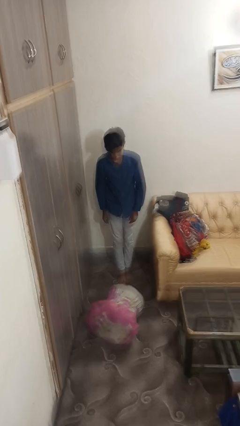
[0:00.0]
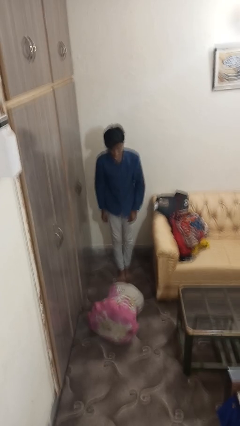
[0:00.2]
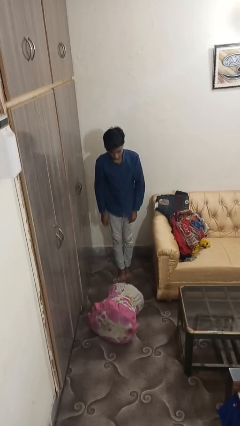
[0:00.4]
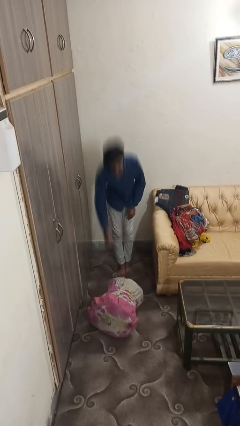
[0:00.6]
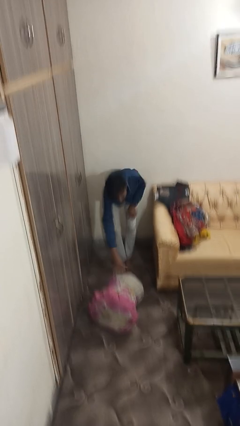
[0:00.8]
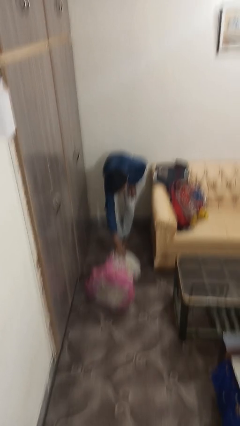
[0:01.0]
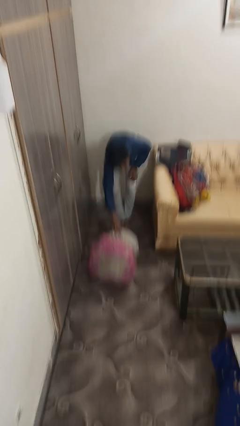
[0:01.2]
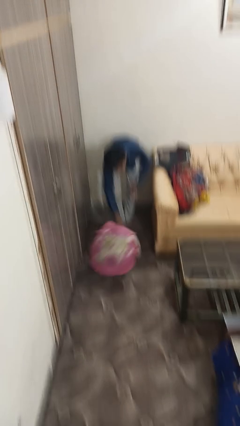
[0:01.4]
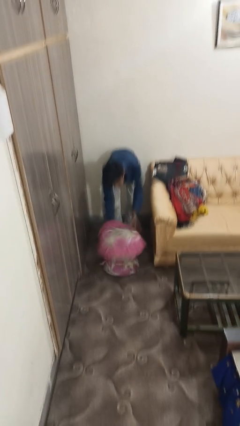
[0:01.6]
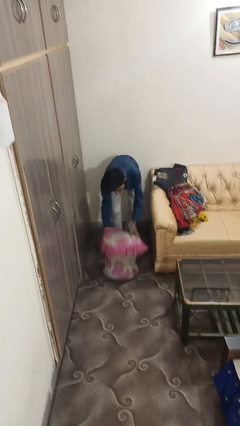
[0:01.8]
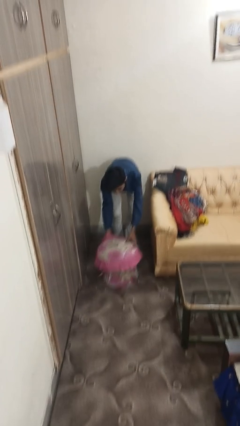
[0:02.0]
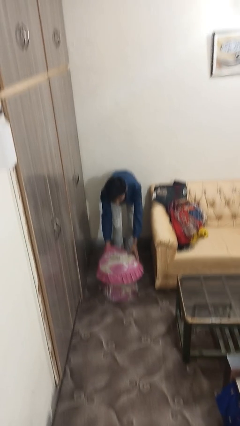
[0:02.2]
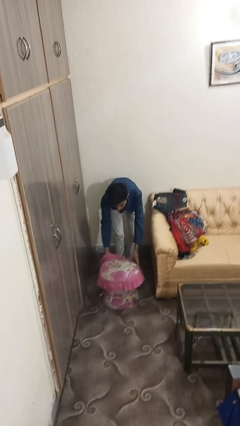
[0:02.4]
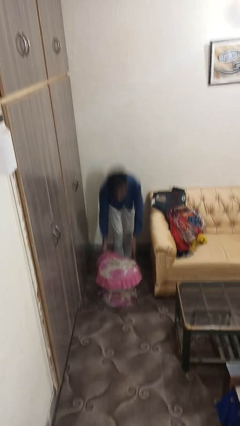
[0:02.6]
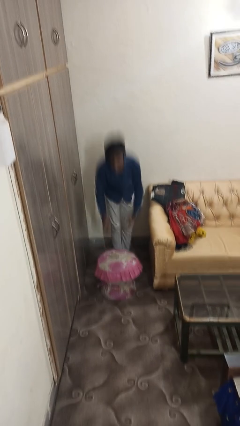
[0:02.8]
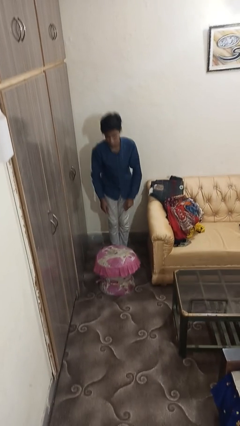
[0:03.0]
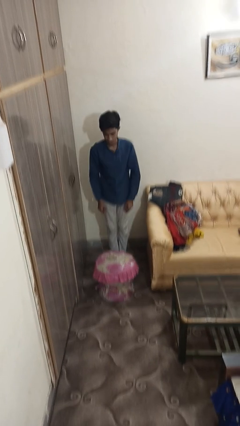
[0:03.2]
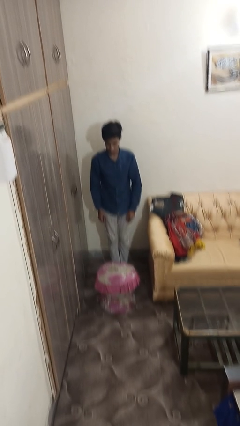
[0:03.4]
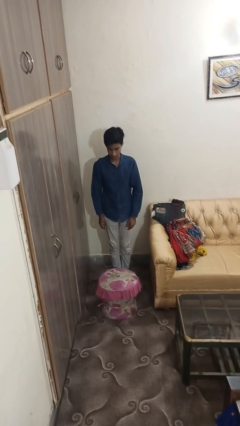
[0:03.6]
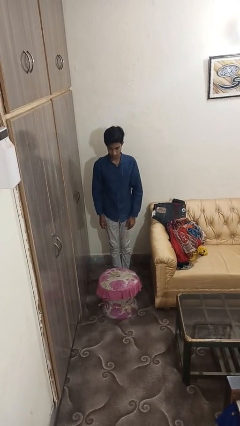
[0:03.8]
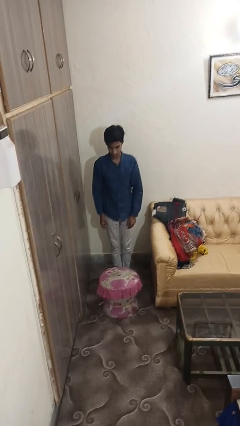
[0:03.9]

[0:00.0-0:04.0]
person sets upright furniture

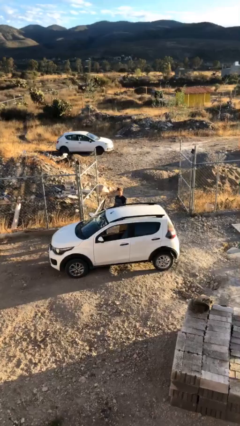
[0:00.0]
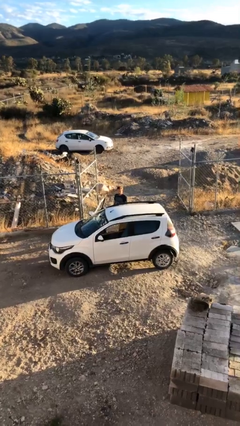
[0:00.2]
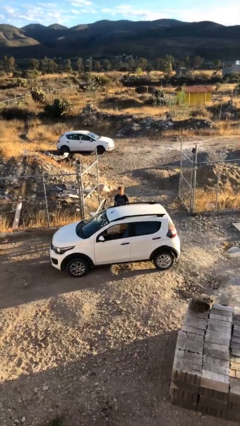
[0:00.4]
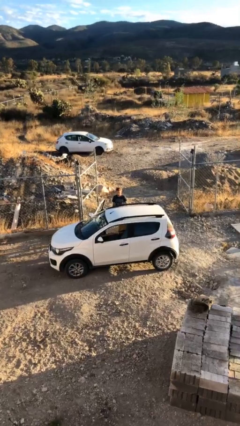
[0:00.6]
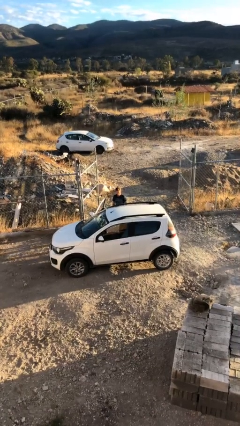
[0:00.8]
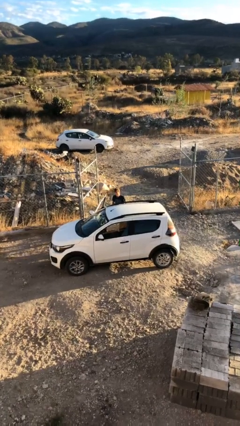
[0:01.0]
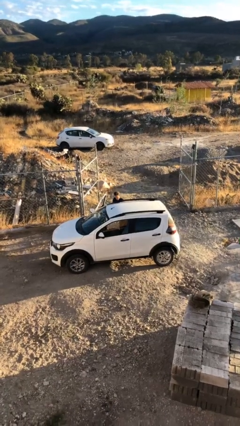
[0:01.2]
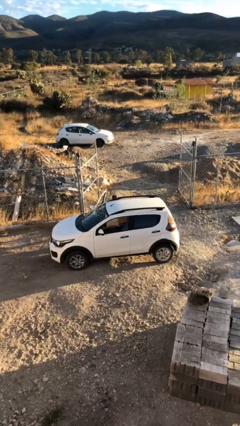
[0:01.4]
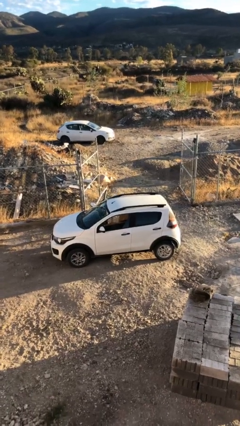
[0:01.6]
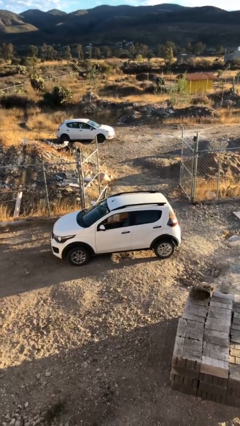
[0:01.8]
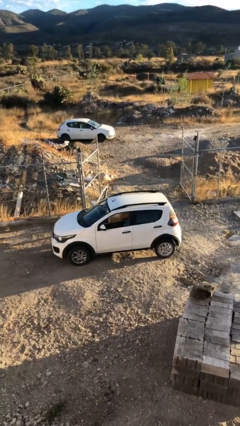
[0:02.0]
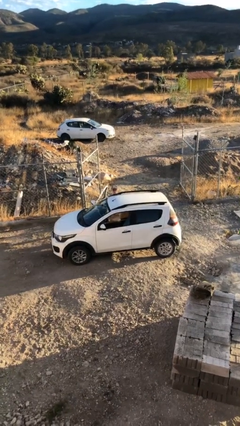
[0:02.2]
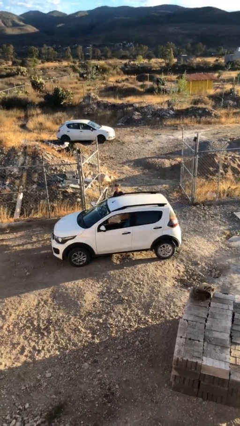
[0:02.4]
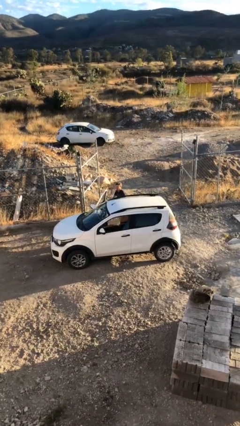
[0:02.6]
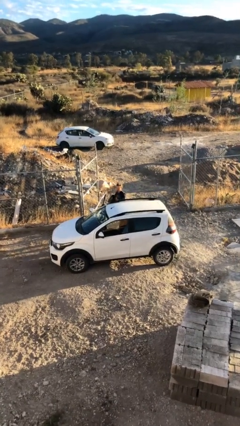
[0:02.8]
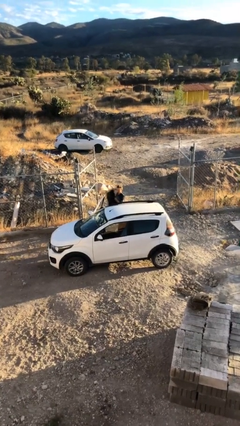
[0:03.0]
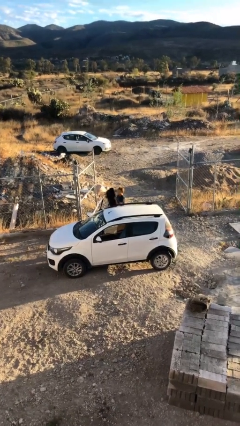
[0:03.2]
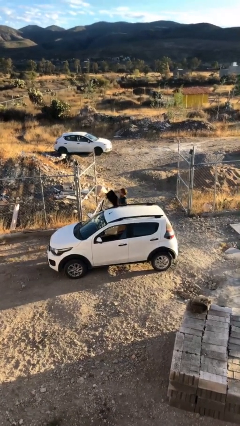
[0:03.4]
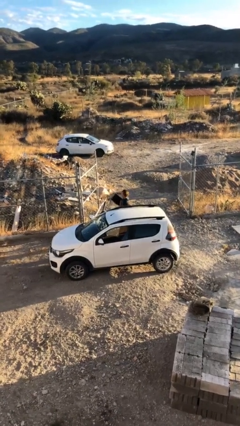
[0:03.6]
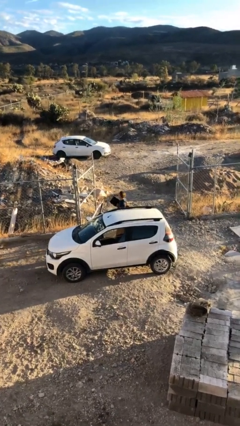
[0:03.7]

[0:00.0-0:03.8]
person unloads car

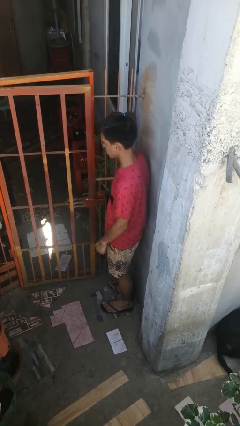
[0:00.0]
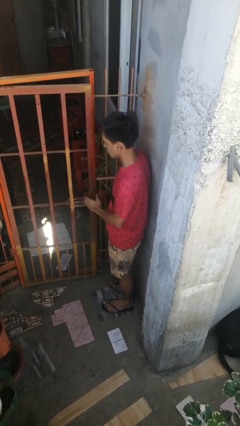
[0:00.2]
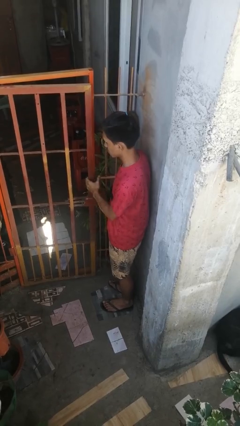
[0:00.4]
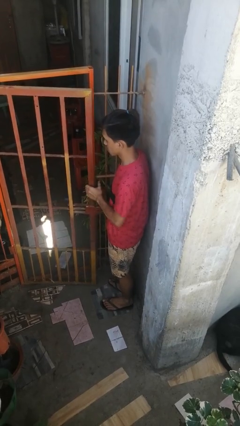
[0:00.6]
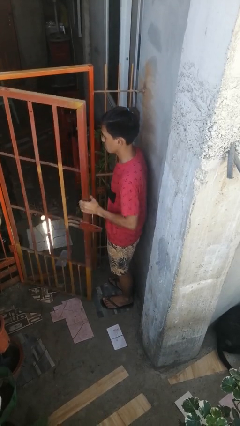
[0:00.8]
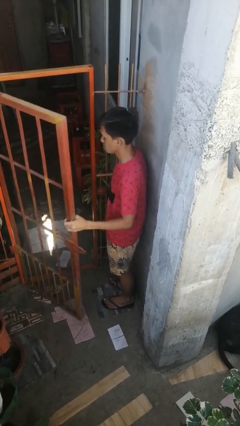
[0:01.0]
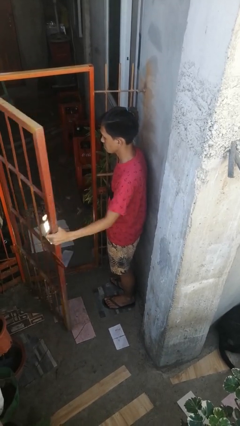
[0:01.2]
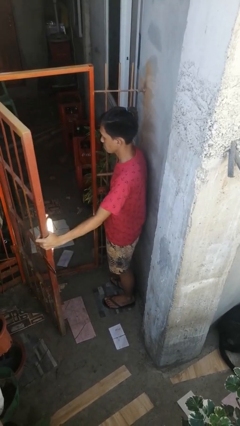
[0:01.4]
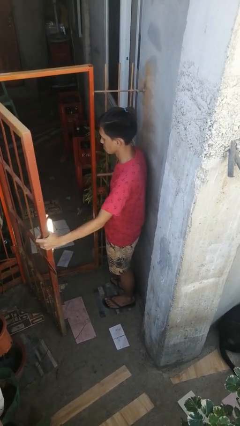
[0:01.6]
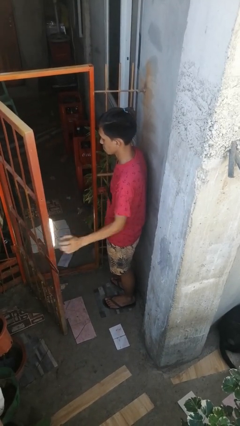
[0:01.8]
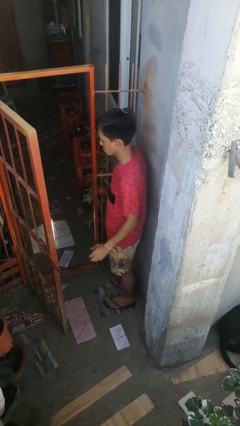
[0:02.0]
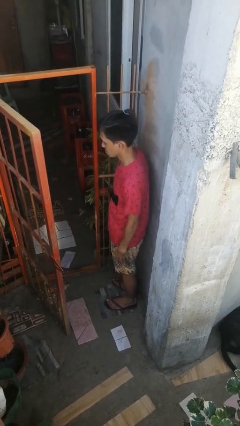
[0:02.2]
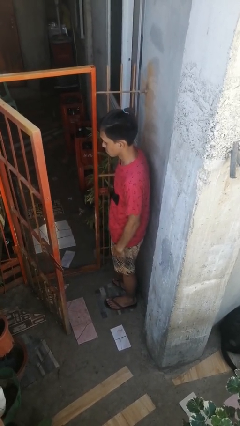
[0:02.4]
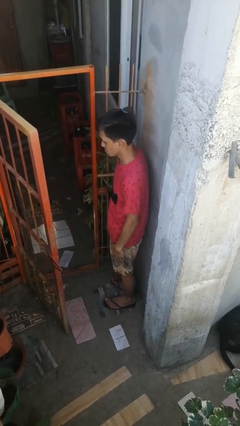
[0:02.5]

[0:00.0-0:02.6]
person opens gate

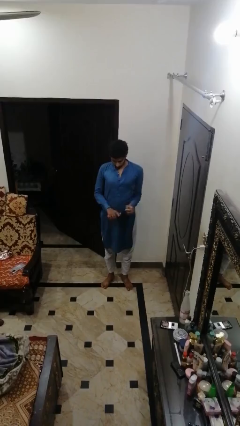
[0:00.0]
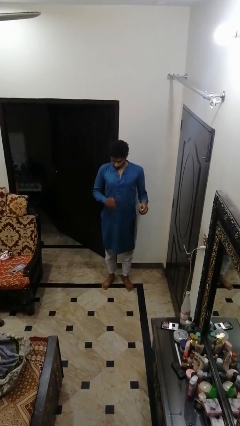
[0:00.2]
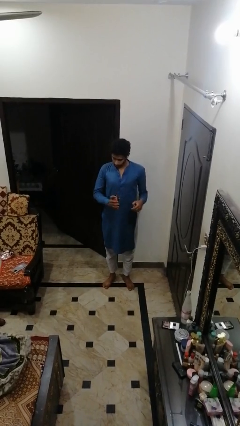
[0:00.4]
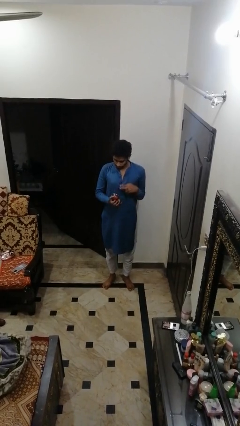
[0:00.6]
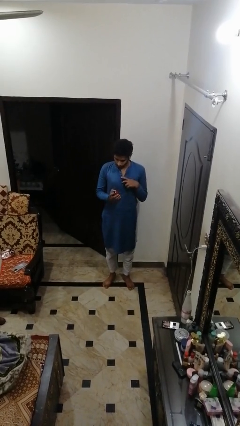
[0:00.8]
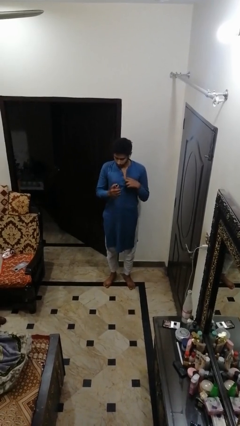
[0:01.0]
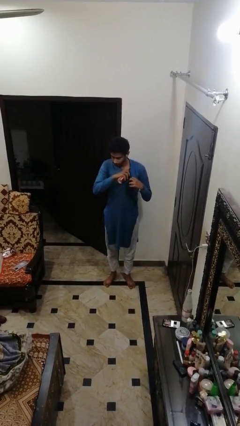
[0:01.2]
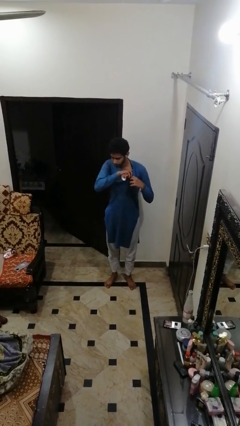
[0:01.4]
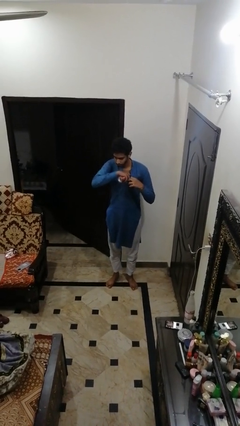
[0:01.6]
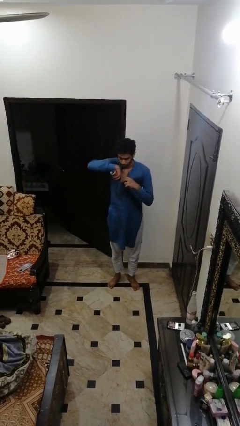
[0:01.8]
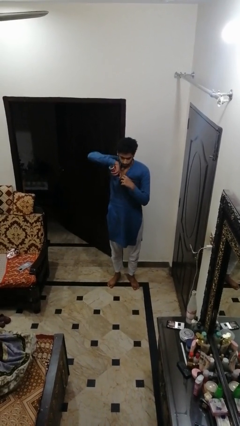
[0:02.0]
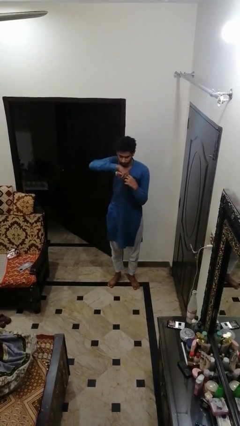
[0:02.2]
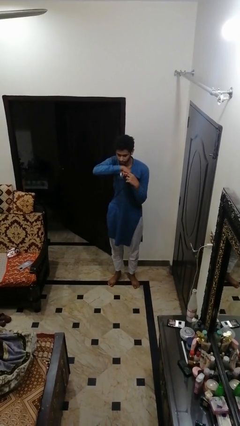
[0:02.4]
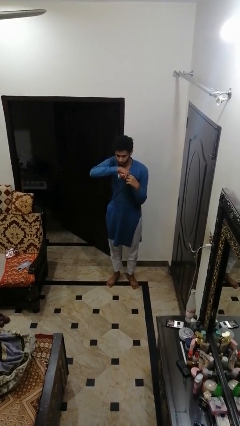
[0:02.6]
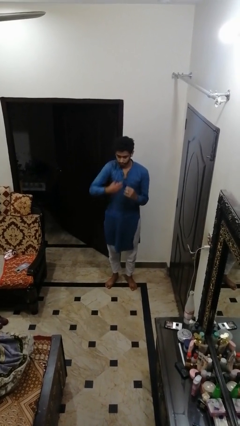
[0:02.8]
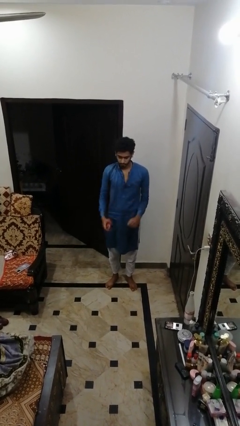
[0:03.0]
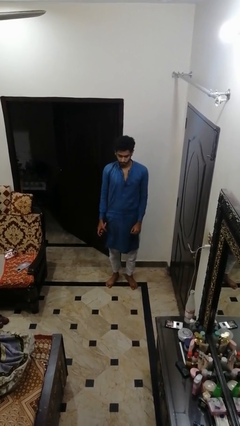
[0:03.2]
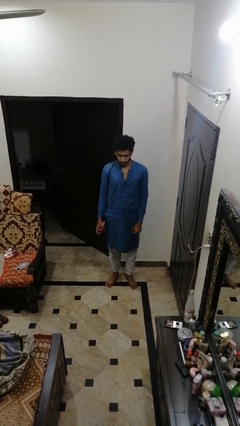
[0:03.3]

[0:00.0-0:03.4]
person applies deodorant

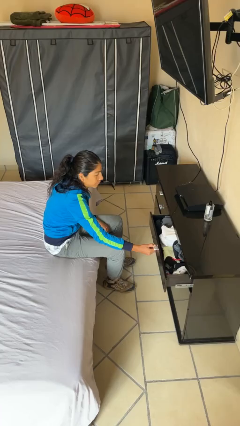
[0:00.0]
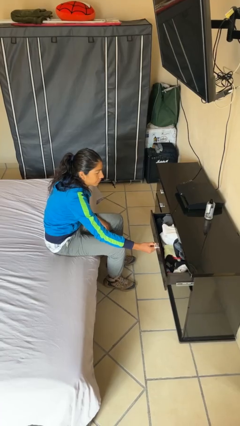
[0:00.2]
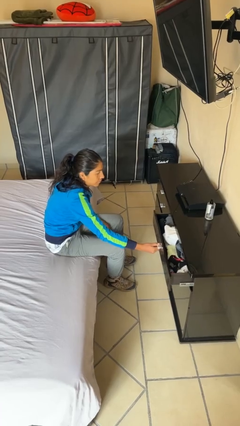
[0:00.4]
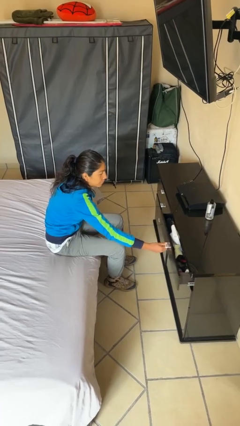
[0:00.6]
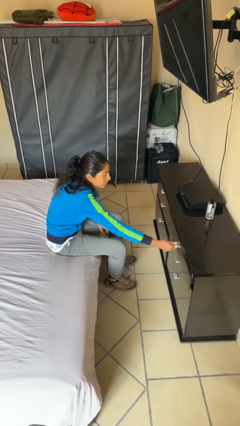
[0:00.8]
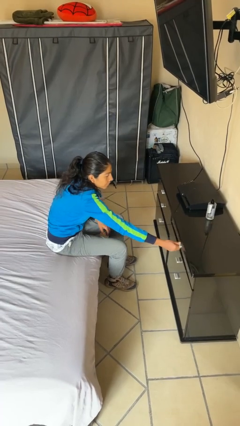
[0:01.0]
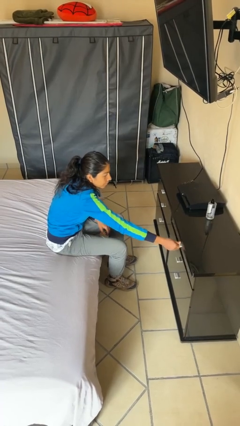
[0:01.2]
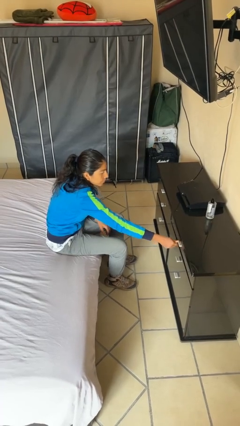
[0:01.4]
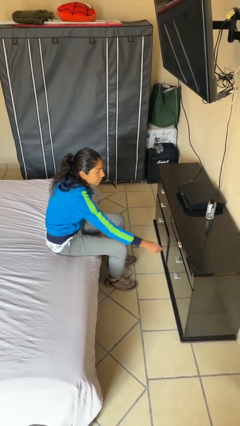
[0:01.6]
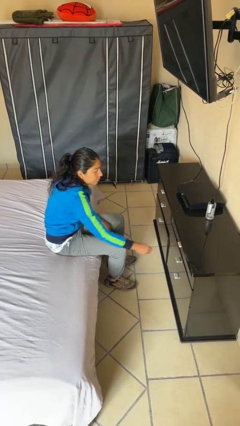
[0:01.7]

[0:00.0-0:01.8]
person closes dresser drawer

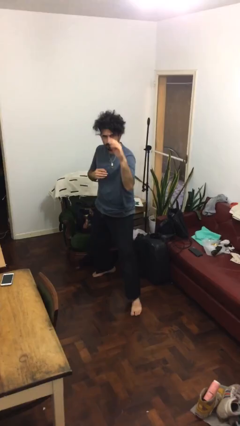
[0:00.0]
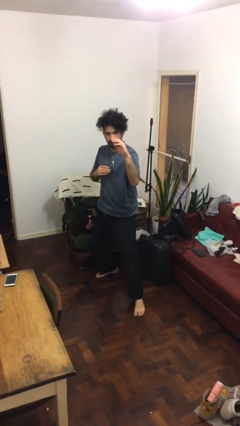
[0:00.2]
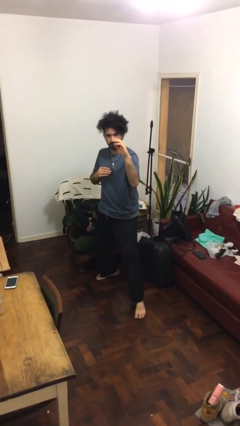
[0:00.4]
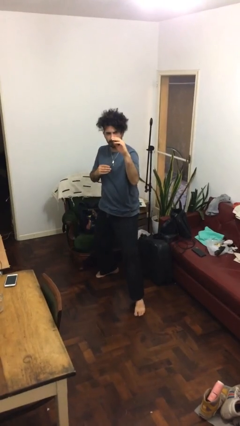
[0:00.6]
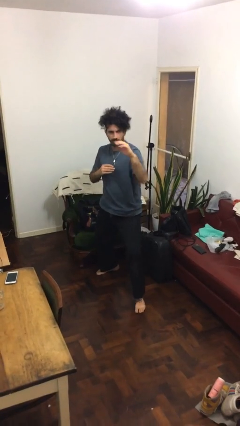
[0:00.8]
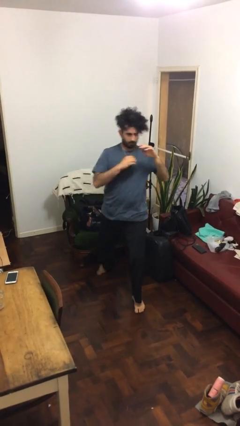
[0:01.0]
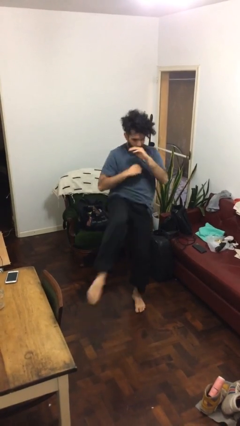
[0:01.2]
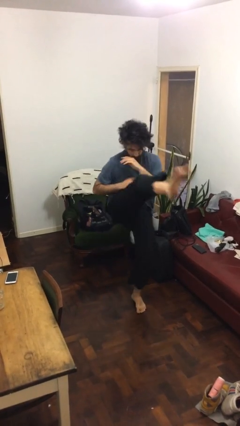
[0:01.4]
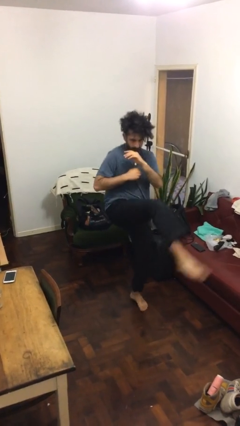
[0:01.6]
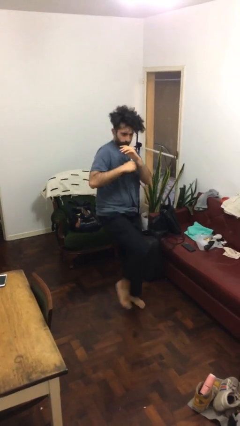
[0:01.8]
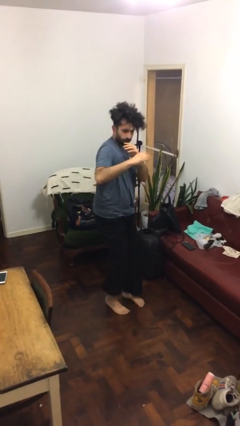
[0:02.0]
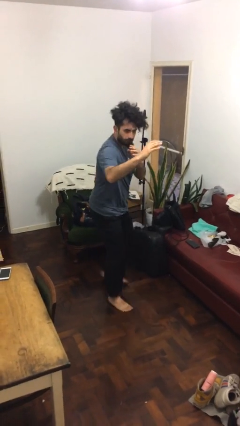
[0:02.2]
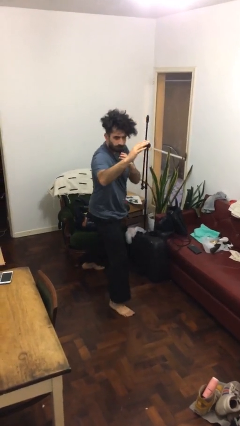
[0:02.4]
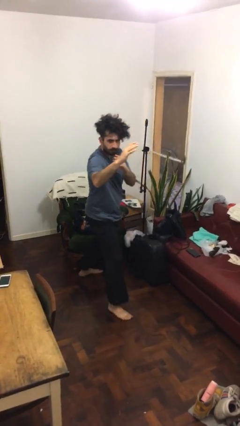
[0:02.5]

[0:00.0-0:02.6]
person karate kicks
